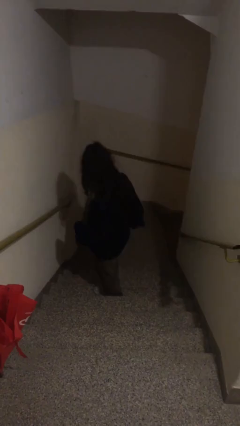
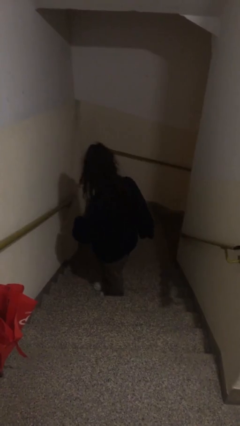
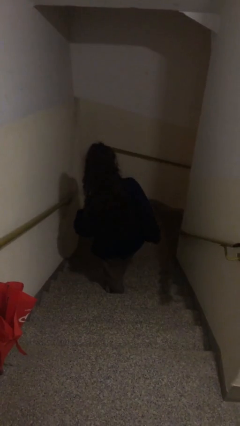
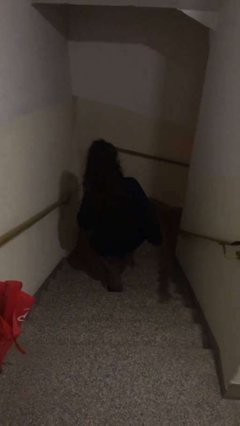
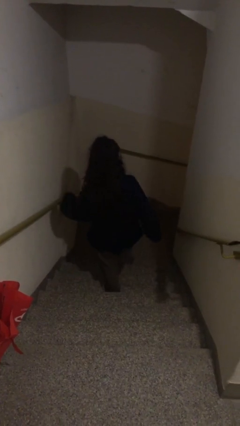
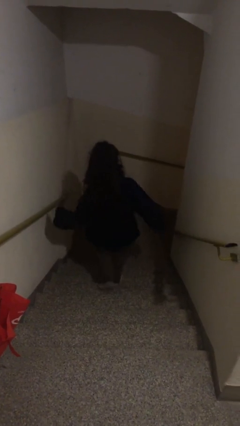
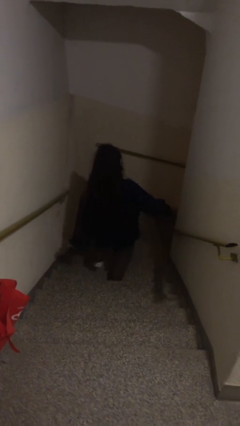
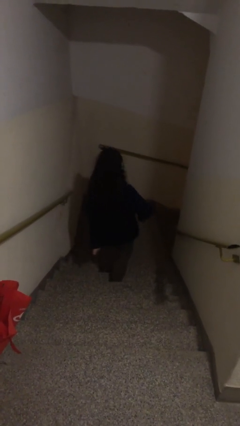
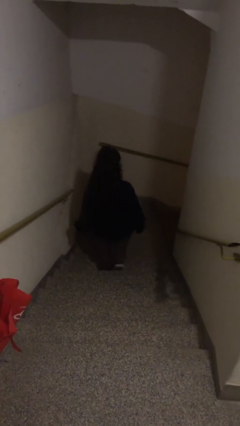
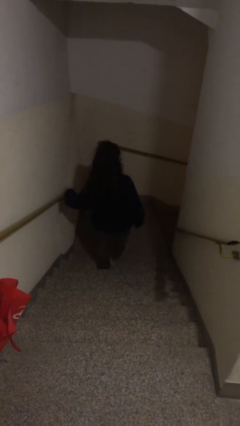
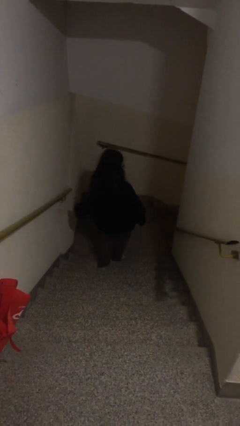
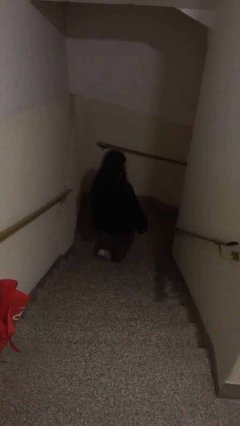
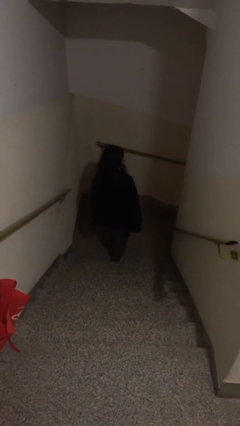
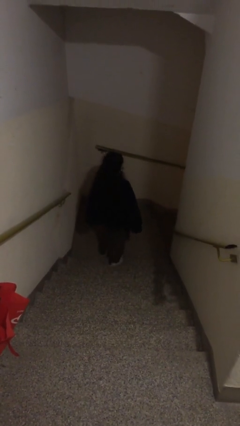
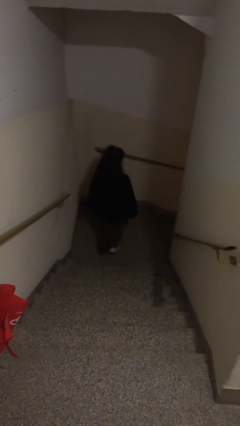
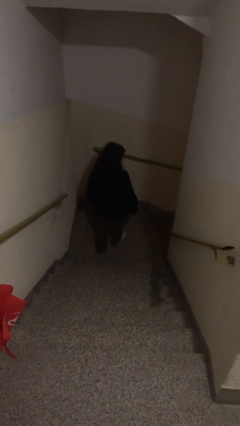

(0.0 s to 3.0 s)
person climbs down stairs

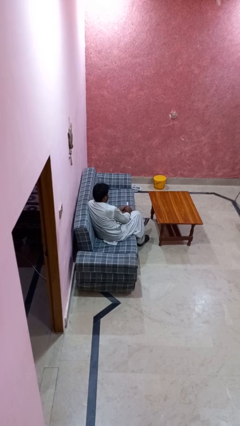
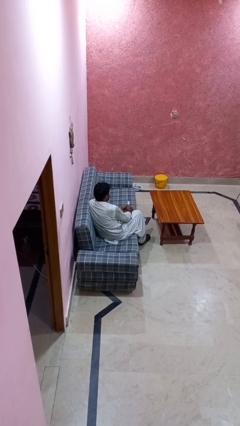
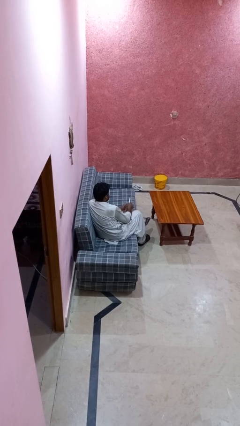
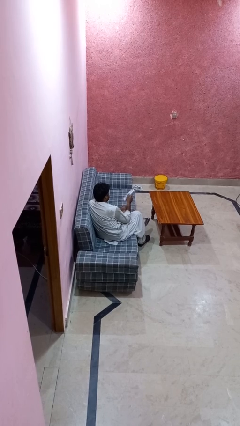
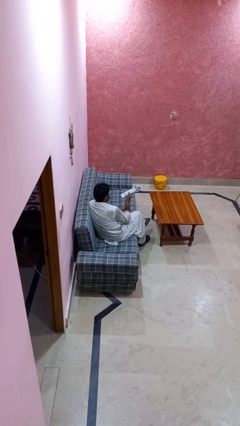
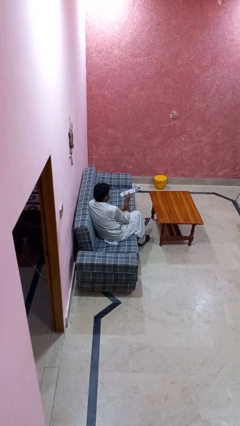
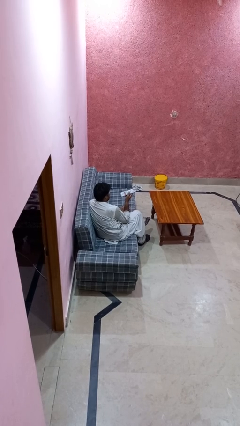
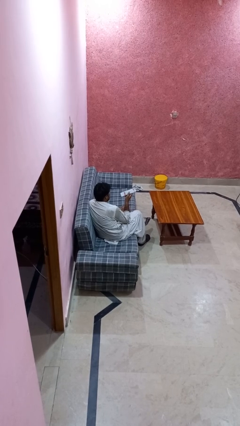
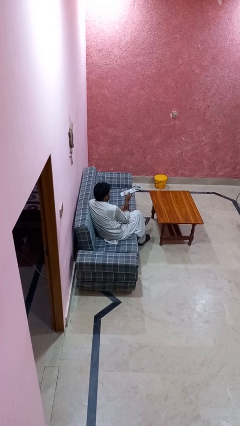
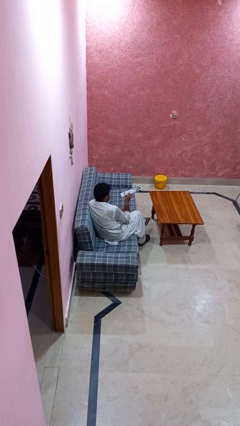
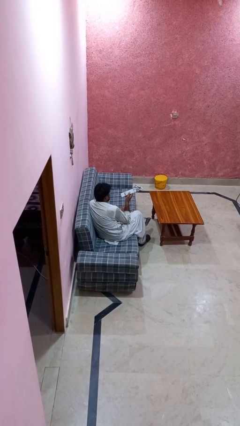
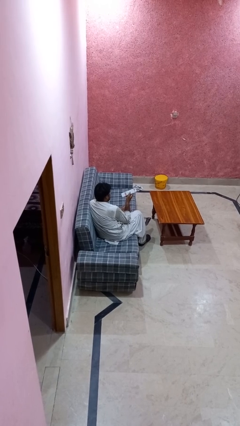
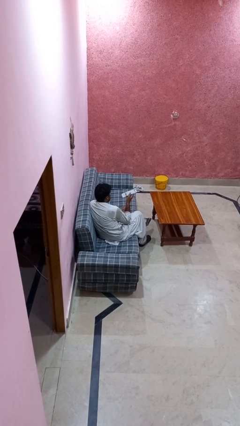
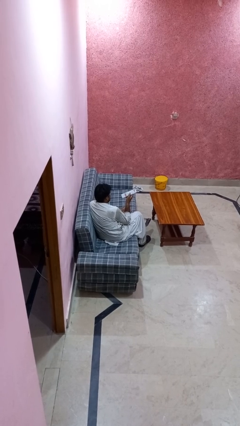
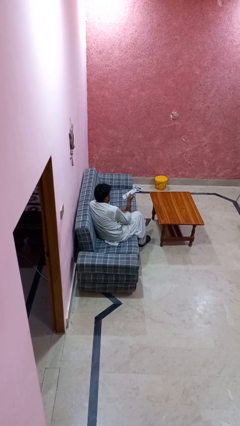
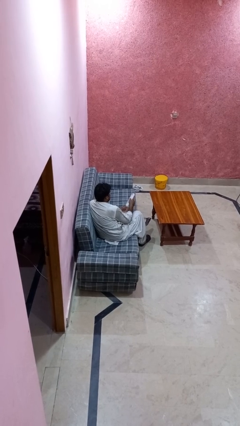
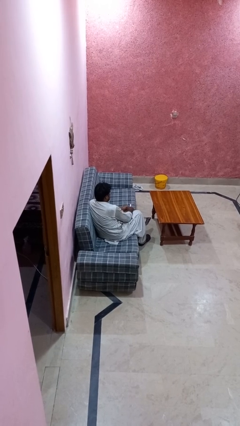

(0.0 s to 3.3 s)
person uses television remote

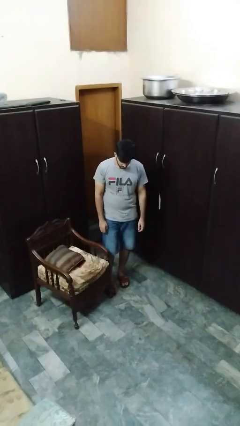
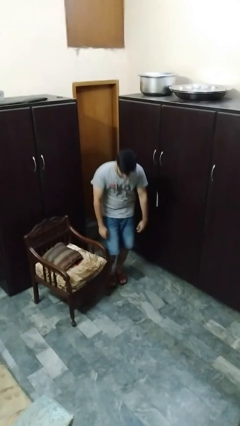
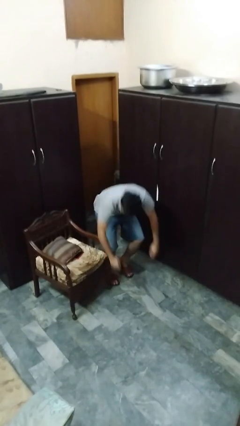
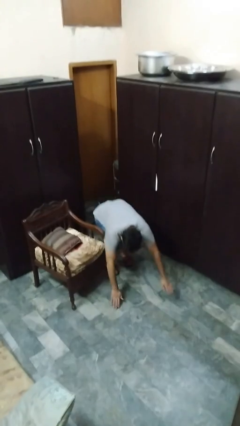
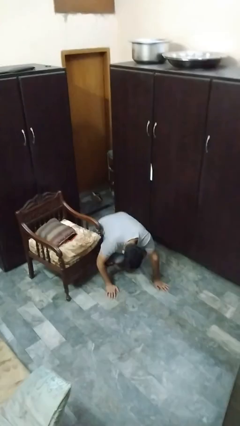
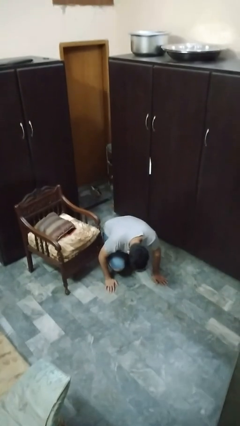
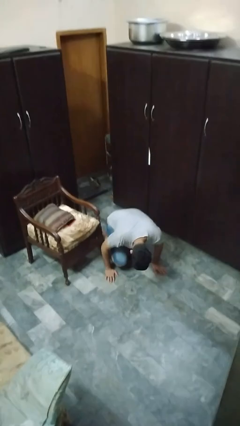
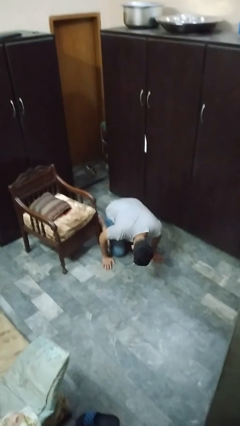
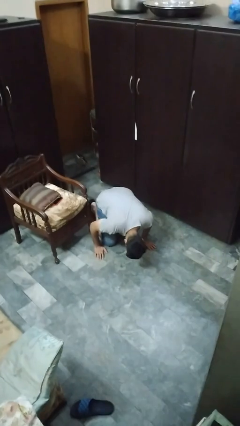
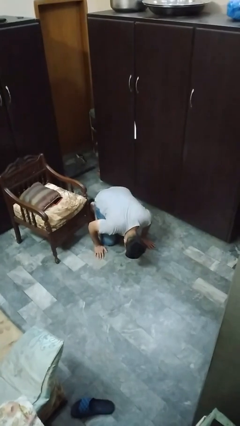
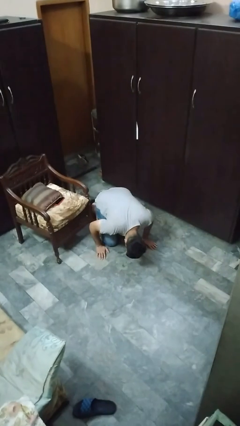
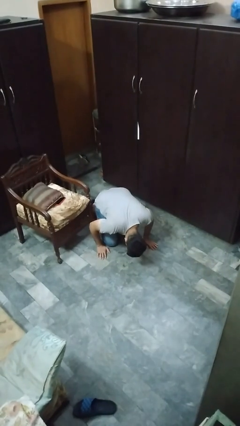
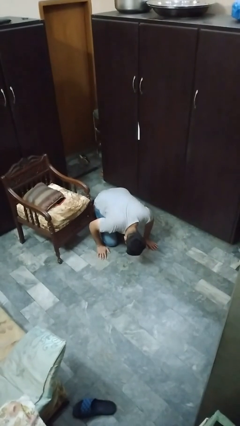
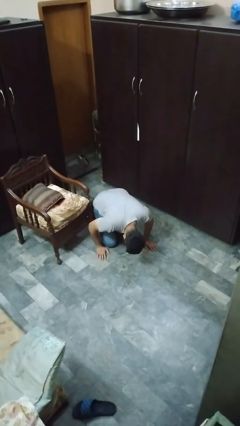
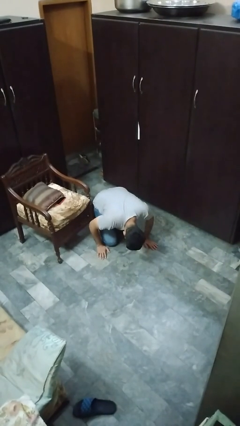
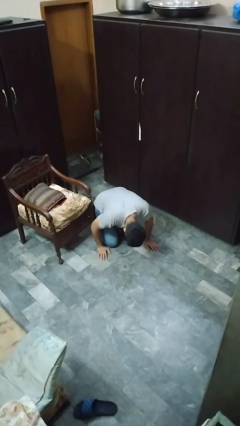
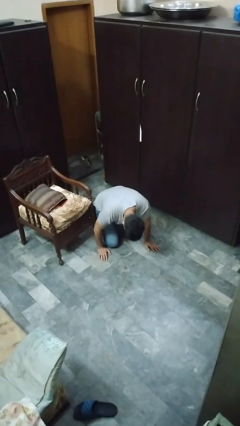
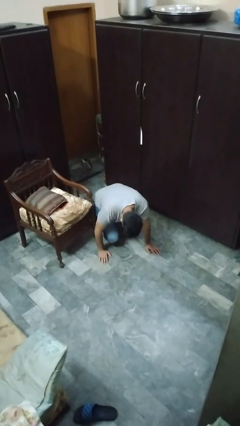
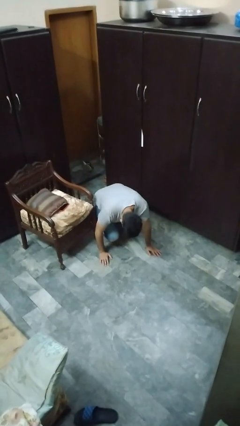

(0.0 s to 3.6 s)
person trips on object on floor

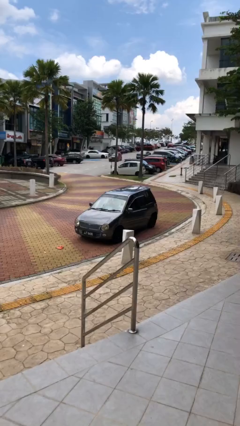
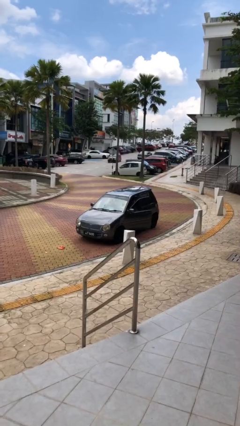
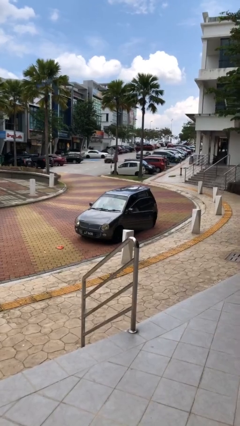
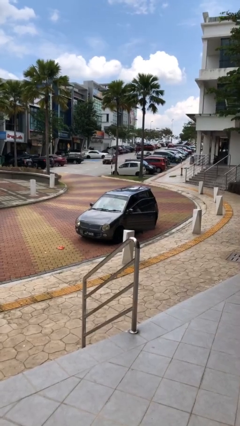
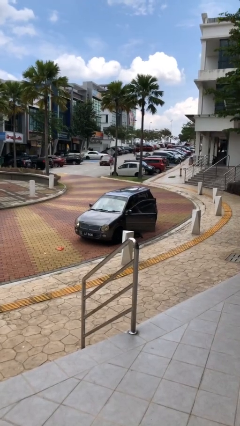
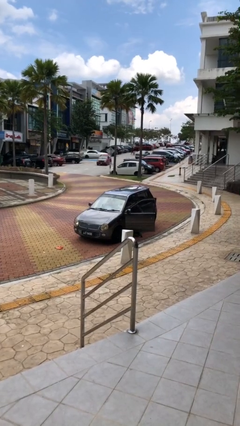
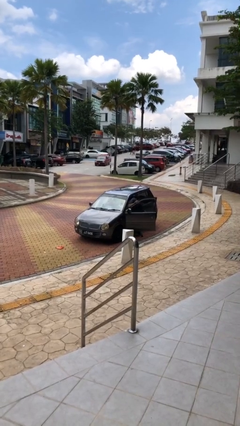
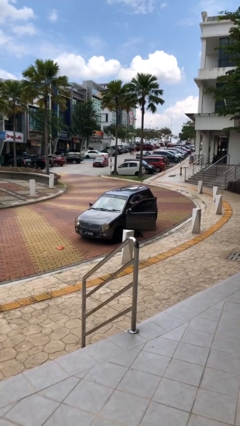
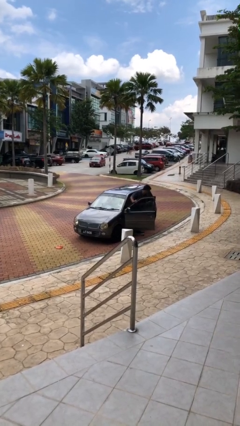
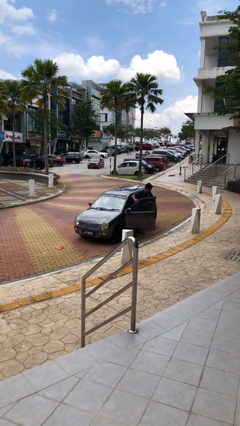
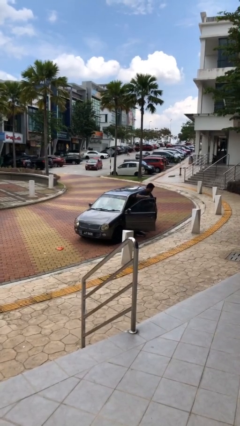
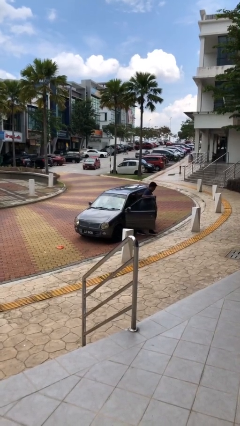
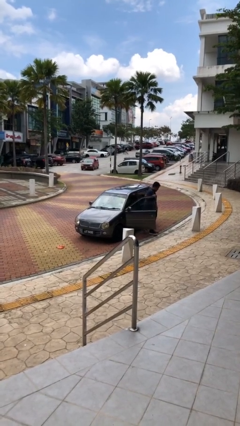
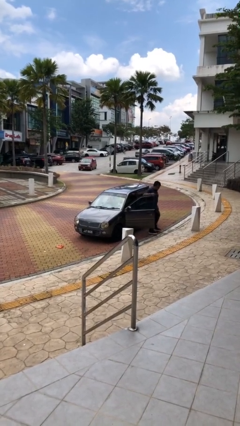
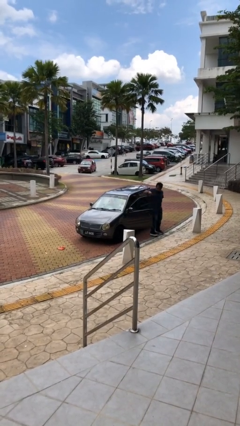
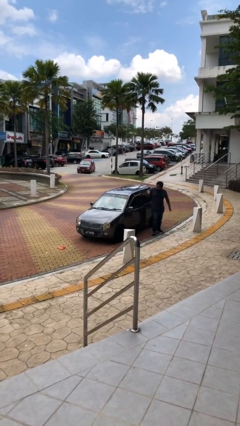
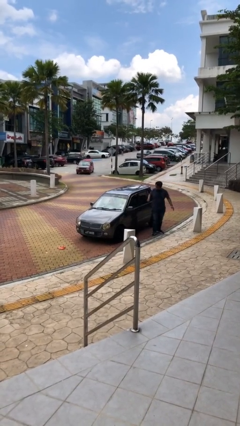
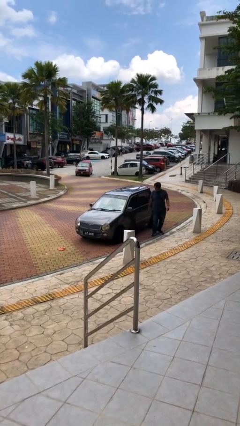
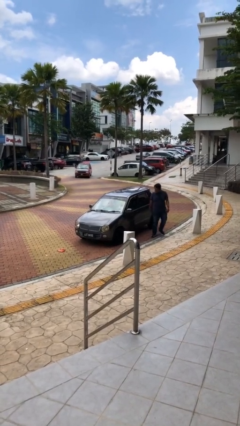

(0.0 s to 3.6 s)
car drops off person

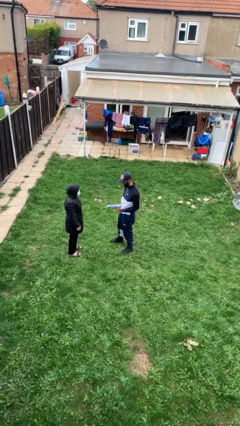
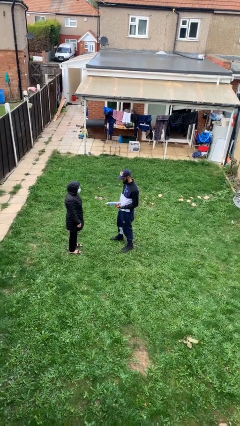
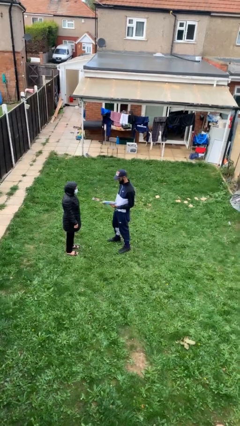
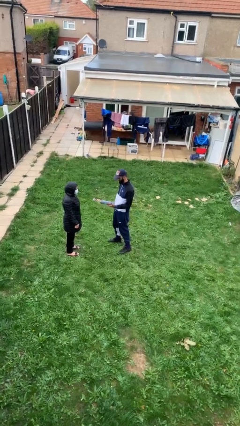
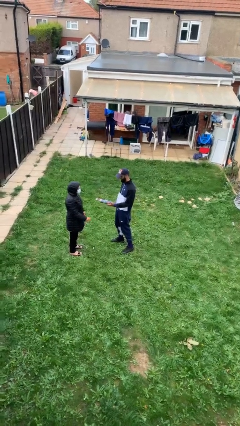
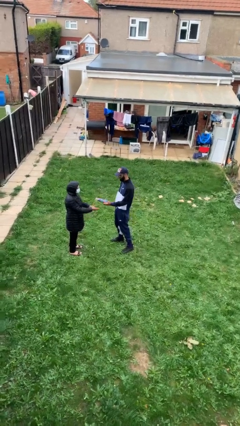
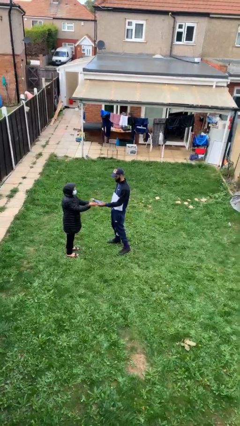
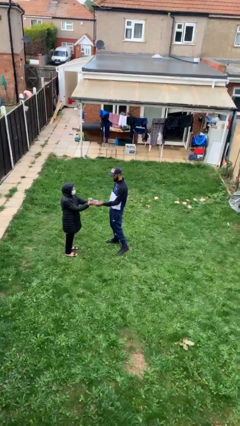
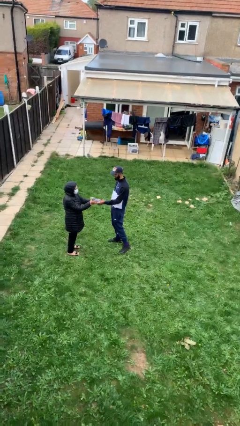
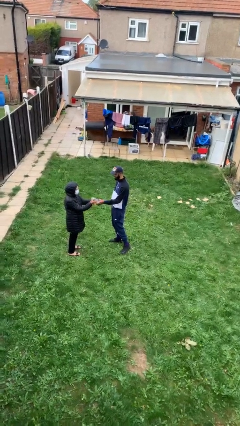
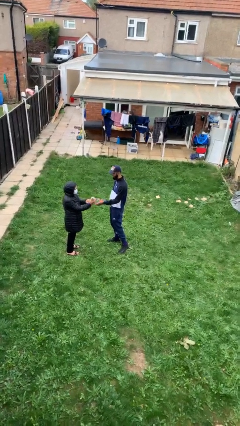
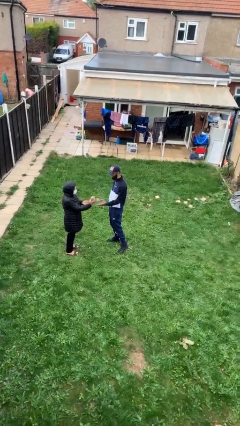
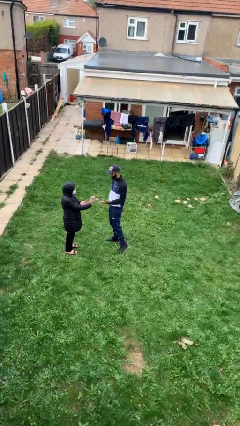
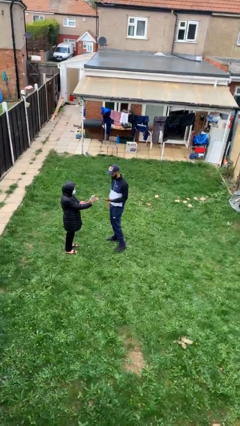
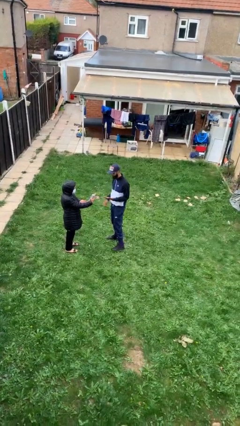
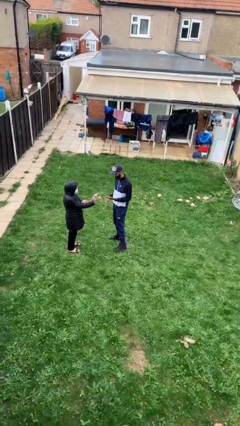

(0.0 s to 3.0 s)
person transfers object to person

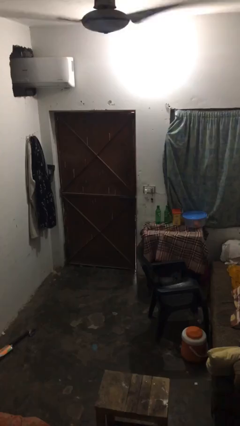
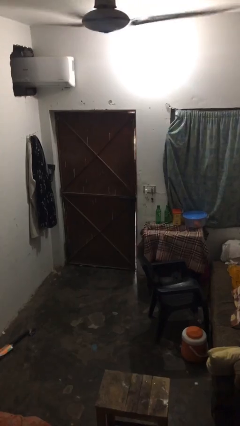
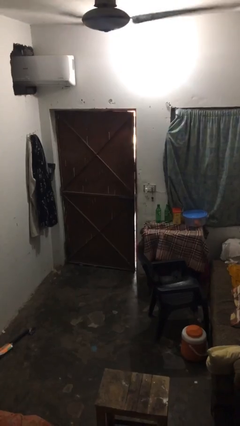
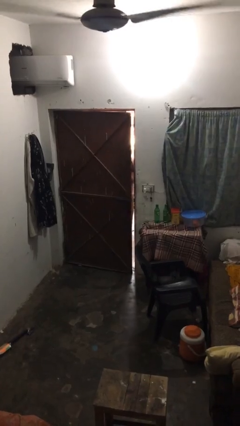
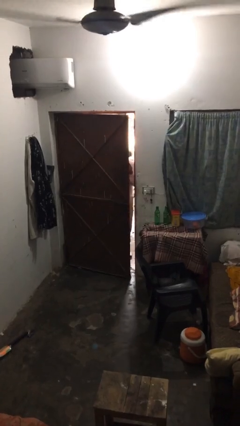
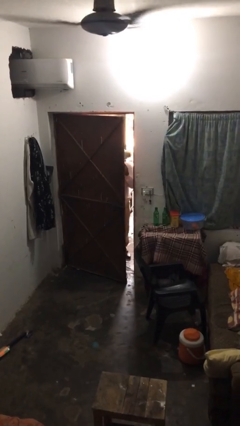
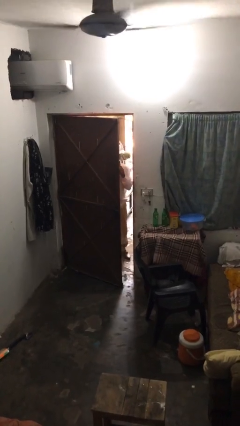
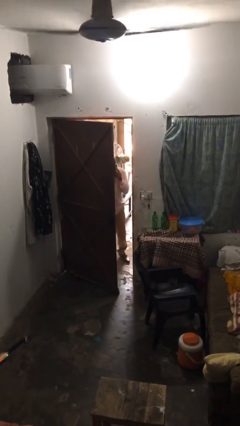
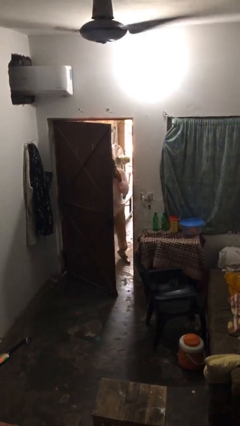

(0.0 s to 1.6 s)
person opens facility door
